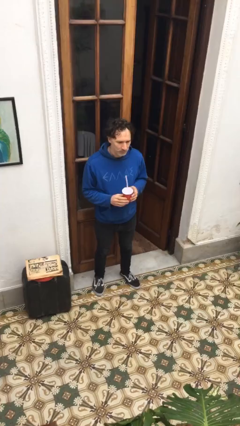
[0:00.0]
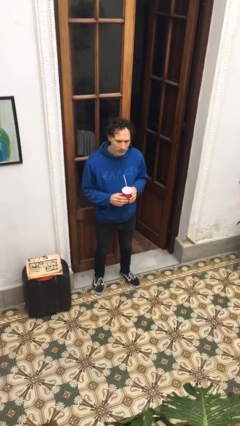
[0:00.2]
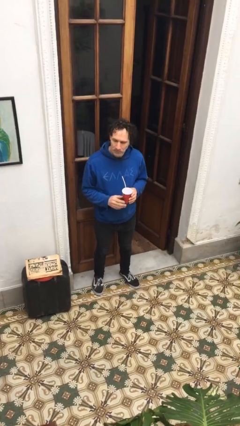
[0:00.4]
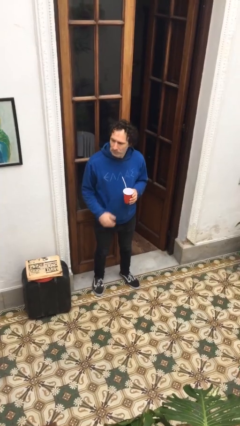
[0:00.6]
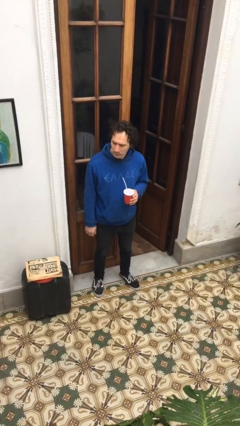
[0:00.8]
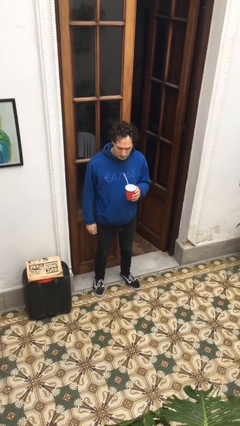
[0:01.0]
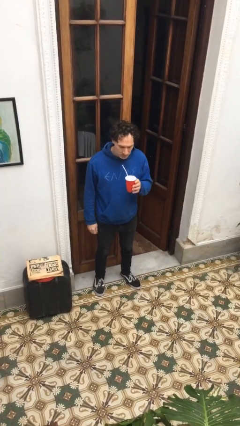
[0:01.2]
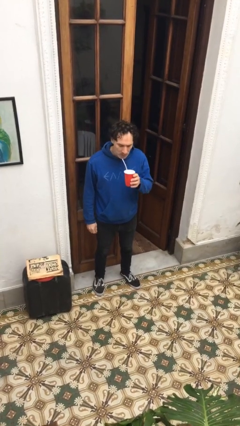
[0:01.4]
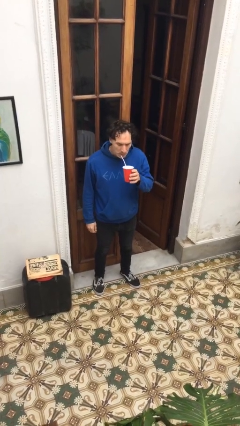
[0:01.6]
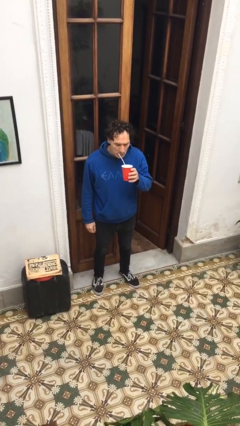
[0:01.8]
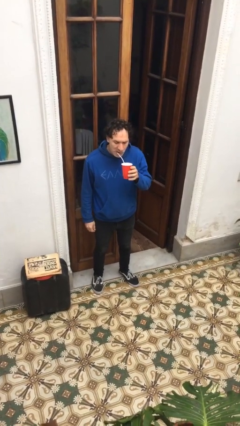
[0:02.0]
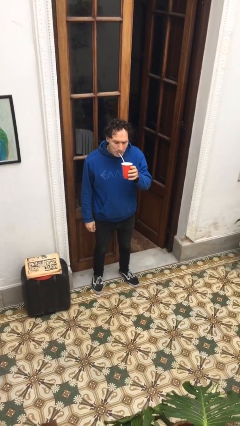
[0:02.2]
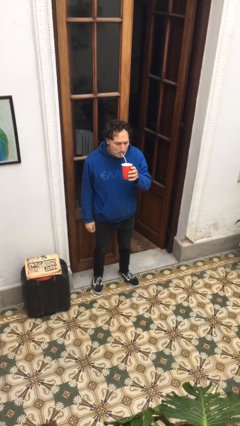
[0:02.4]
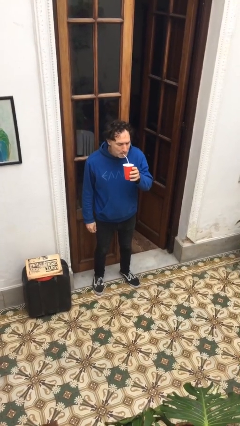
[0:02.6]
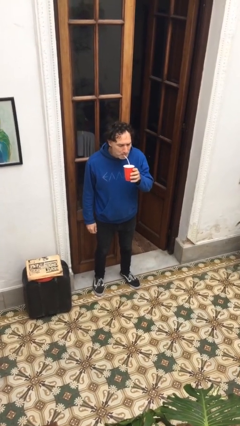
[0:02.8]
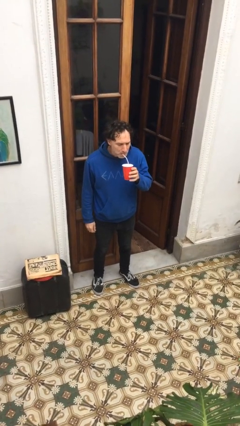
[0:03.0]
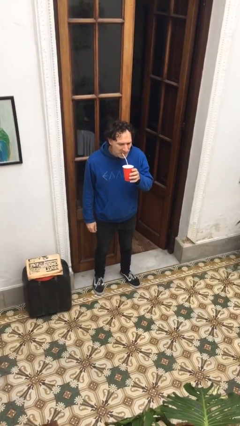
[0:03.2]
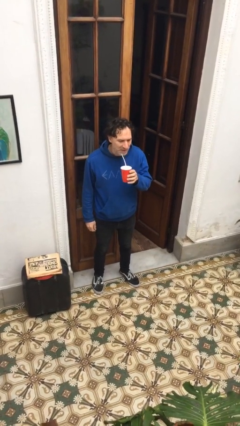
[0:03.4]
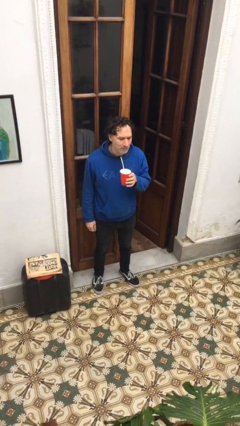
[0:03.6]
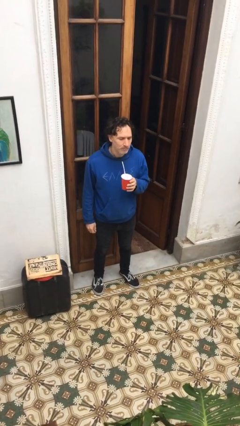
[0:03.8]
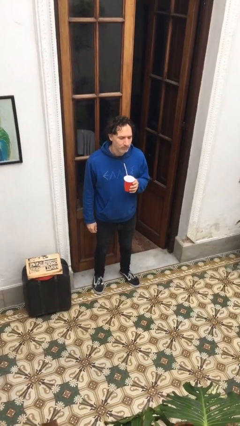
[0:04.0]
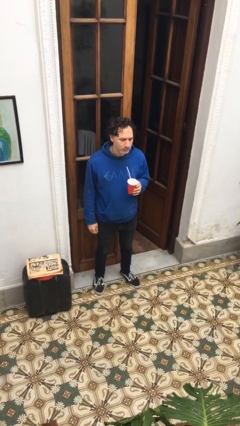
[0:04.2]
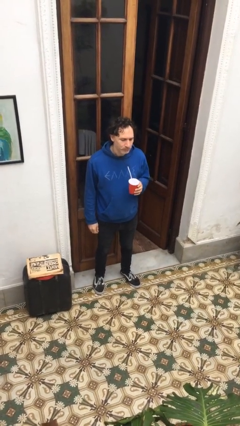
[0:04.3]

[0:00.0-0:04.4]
person drinks from straw

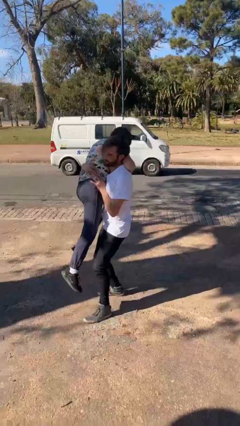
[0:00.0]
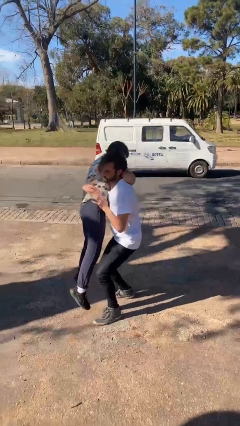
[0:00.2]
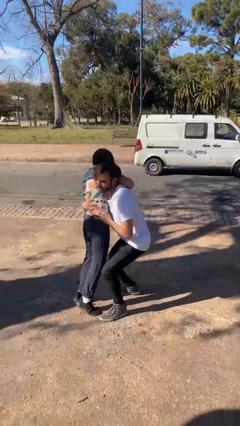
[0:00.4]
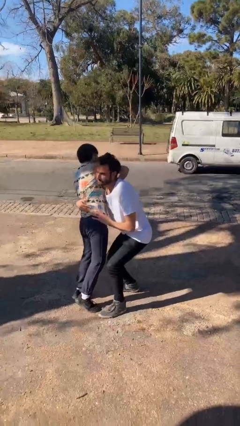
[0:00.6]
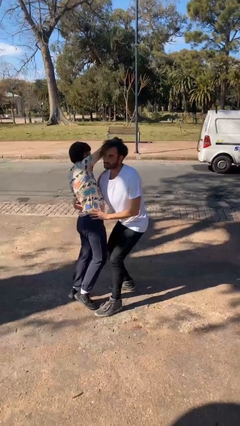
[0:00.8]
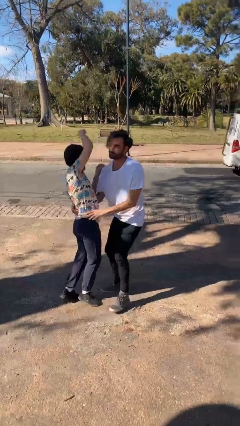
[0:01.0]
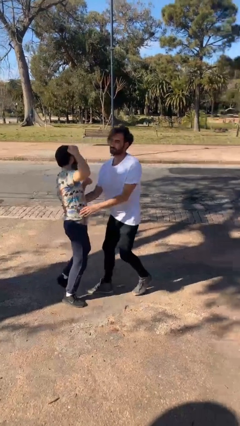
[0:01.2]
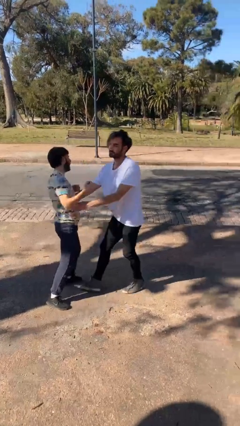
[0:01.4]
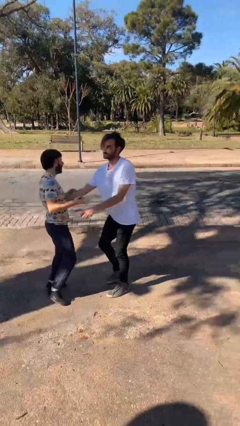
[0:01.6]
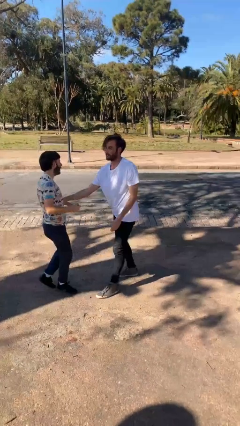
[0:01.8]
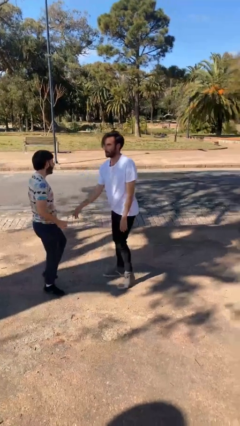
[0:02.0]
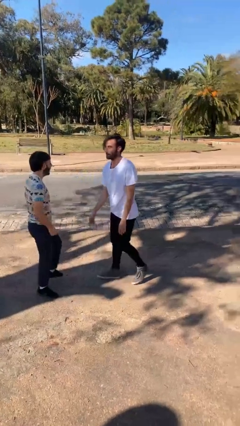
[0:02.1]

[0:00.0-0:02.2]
person puts down person

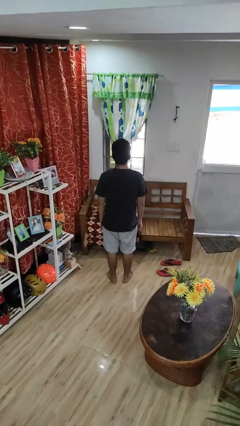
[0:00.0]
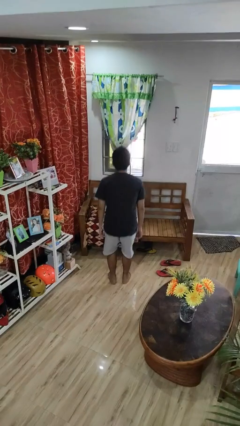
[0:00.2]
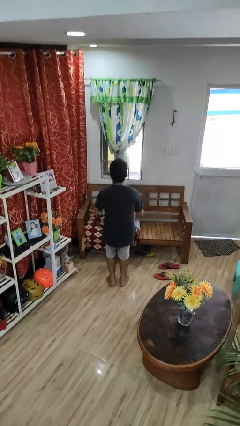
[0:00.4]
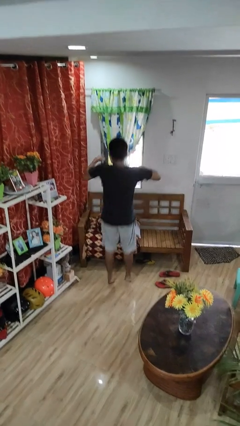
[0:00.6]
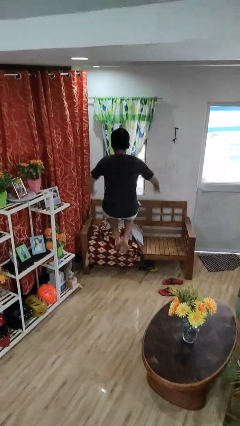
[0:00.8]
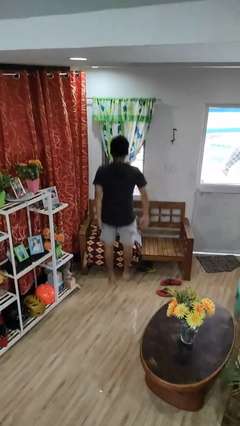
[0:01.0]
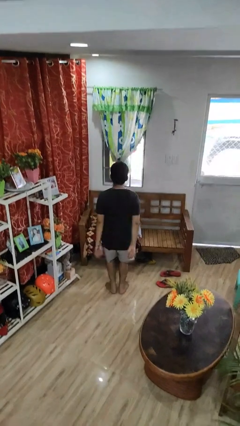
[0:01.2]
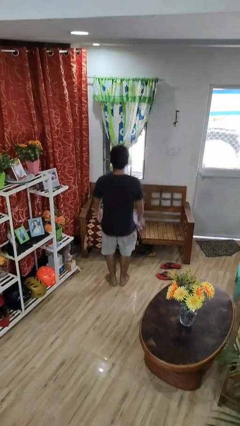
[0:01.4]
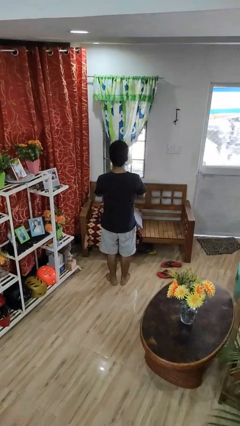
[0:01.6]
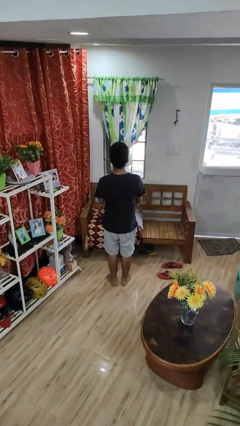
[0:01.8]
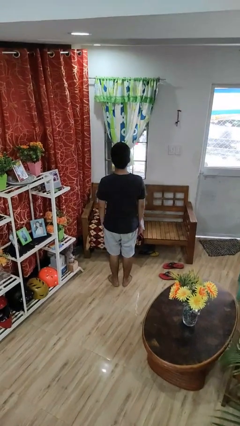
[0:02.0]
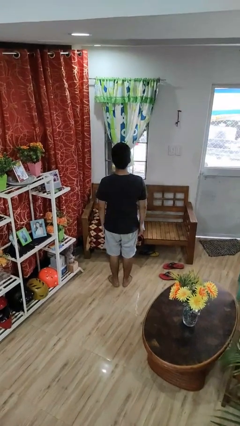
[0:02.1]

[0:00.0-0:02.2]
person jumps

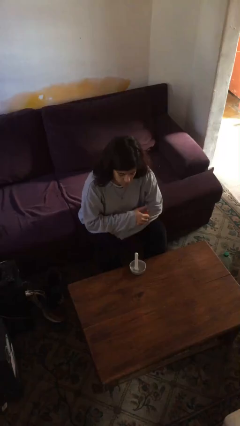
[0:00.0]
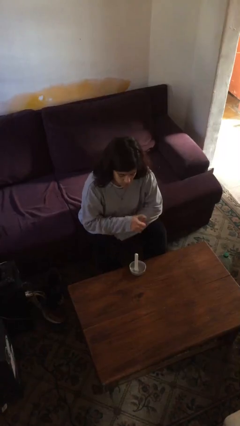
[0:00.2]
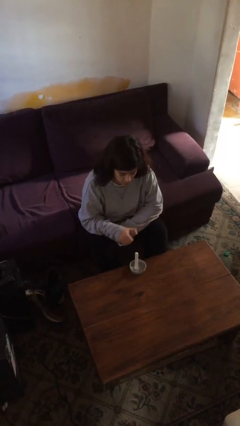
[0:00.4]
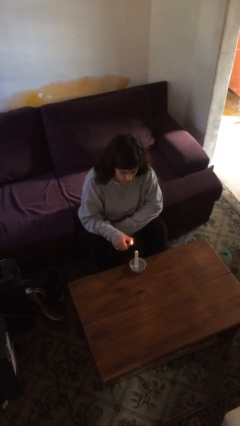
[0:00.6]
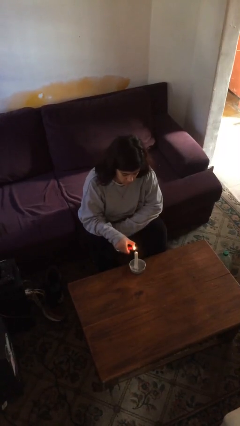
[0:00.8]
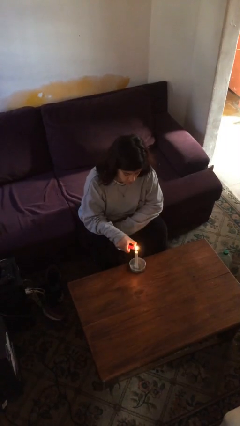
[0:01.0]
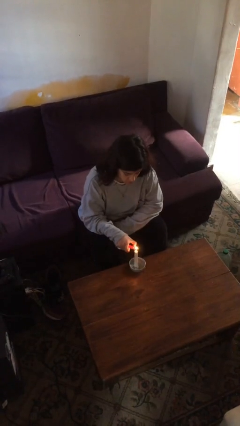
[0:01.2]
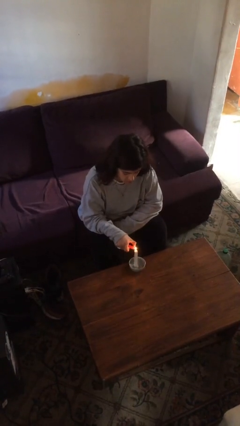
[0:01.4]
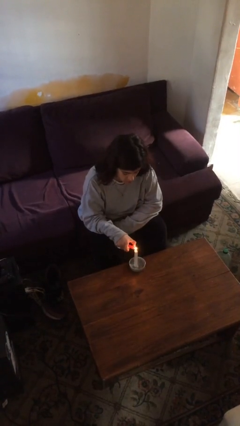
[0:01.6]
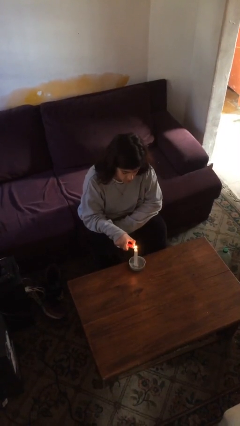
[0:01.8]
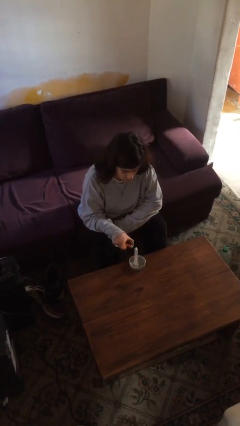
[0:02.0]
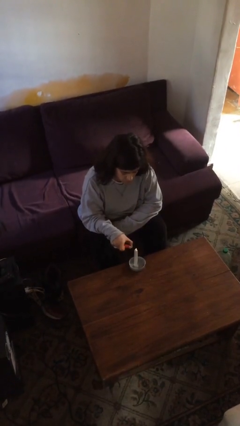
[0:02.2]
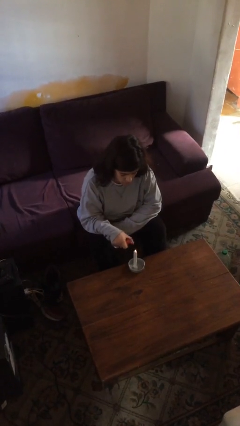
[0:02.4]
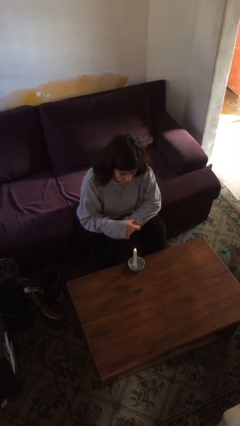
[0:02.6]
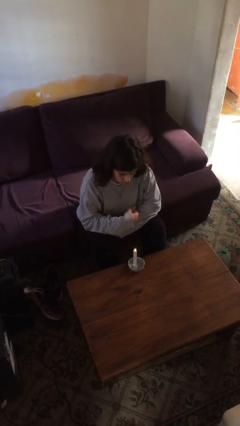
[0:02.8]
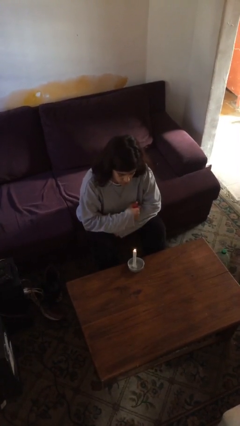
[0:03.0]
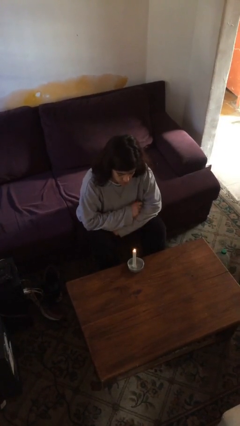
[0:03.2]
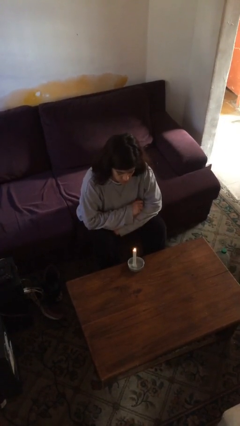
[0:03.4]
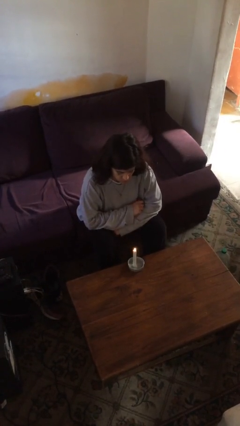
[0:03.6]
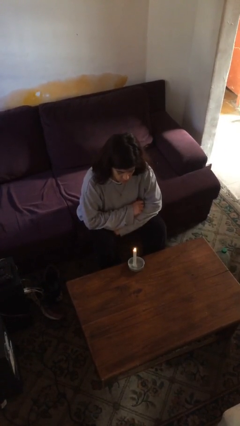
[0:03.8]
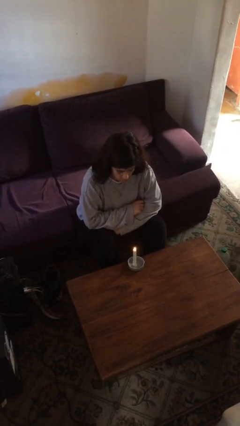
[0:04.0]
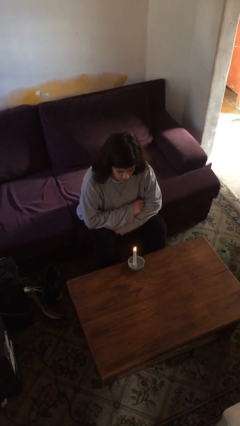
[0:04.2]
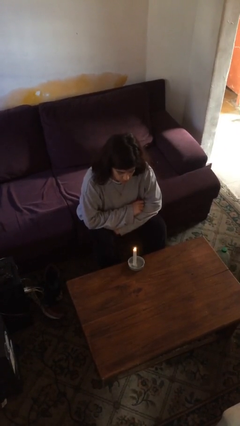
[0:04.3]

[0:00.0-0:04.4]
person lights candle

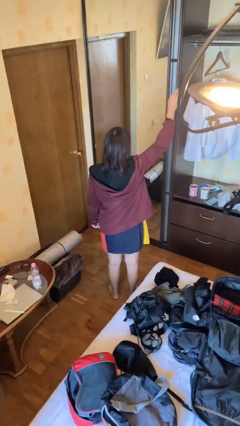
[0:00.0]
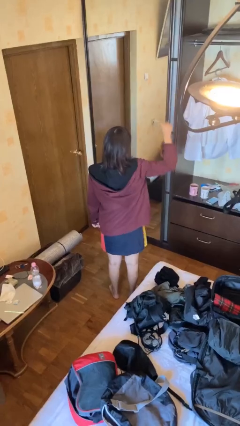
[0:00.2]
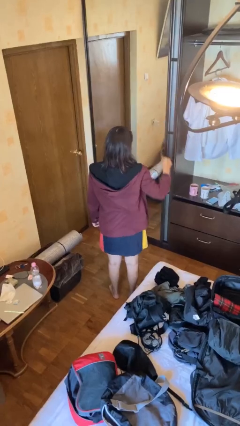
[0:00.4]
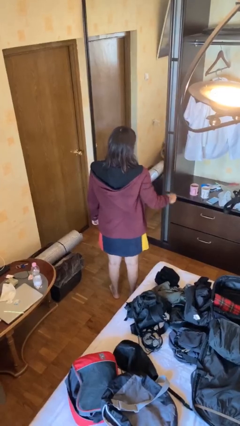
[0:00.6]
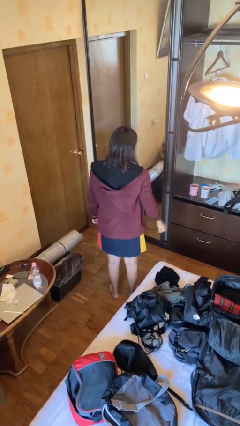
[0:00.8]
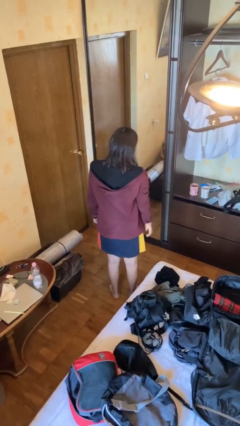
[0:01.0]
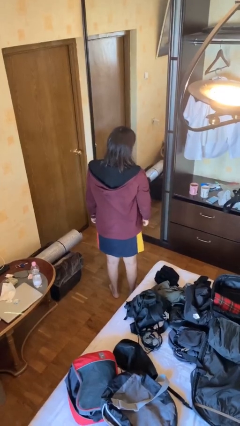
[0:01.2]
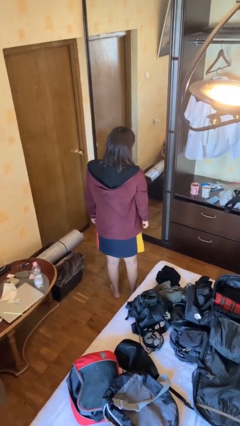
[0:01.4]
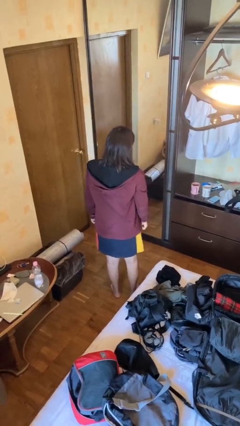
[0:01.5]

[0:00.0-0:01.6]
person gestures lower hand

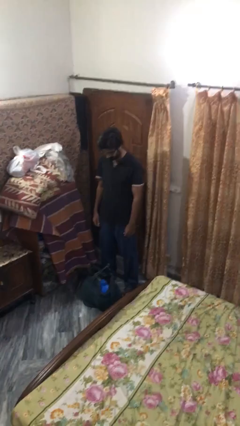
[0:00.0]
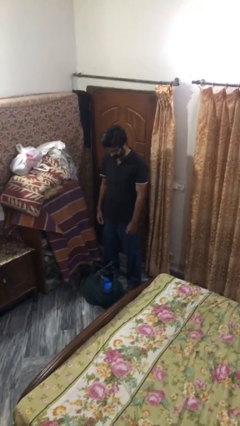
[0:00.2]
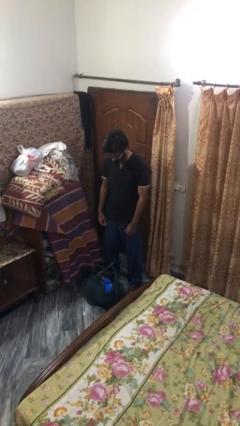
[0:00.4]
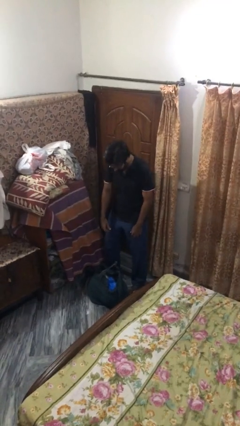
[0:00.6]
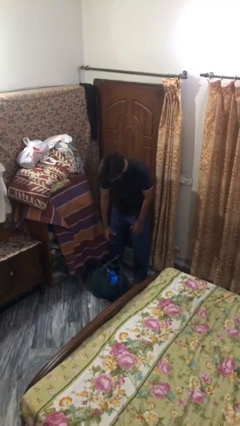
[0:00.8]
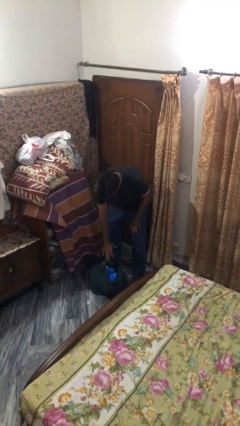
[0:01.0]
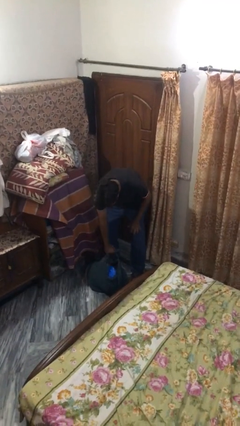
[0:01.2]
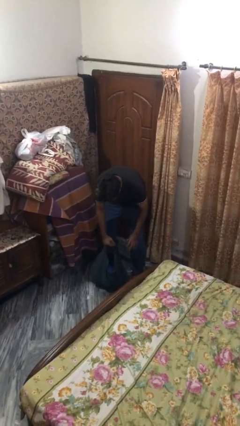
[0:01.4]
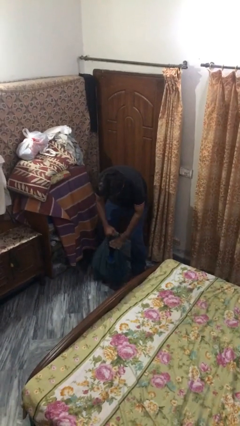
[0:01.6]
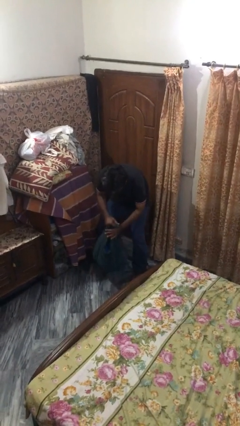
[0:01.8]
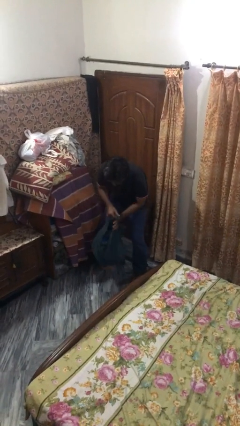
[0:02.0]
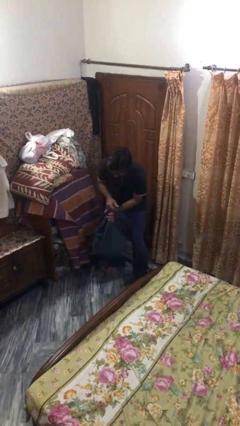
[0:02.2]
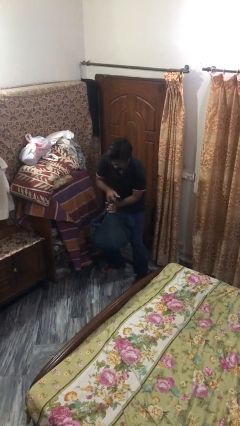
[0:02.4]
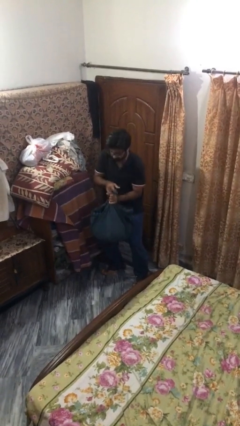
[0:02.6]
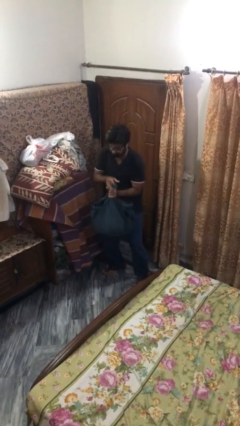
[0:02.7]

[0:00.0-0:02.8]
person picks up object from floor
